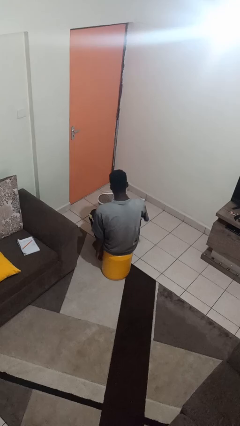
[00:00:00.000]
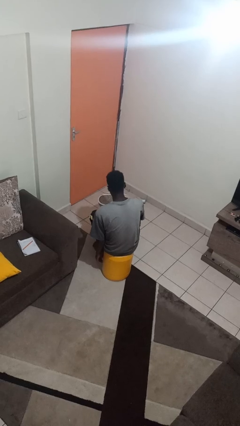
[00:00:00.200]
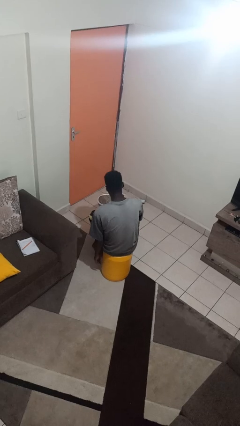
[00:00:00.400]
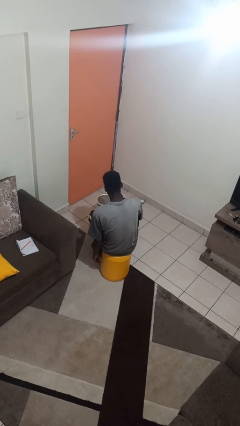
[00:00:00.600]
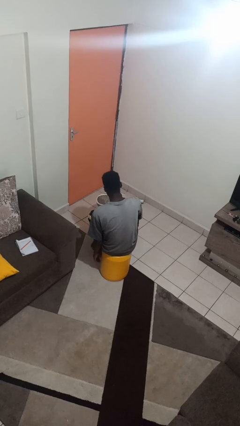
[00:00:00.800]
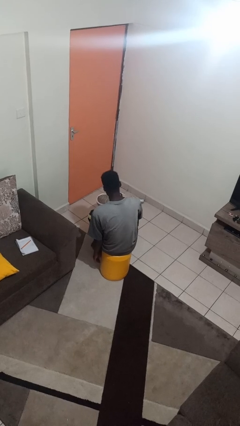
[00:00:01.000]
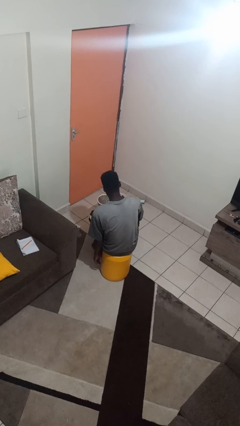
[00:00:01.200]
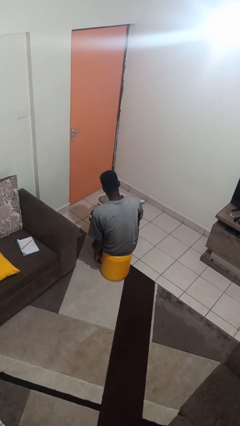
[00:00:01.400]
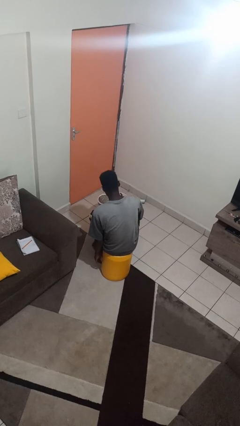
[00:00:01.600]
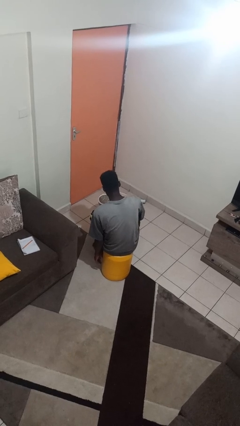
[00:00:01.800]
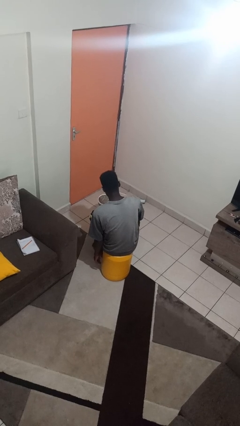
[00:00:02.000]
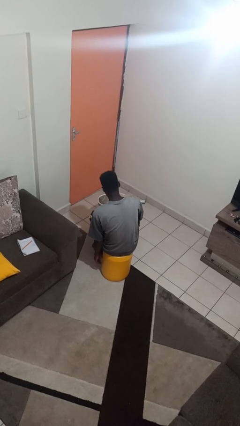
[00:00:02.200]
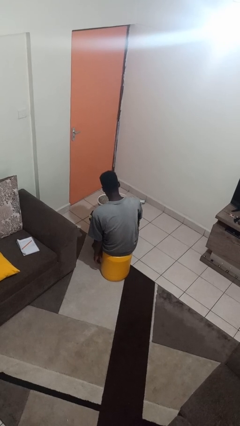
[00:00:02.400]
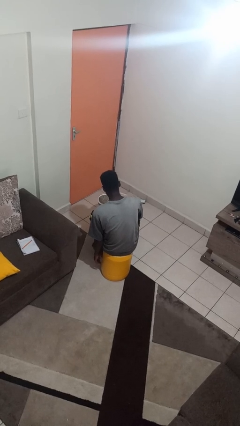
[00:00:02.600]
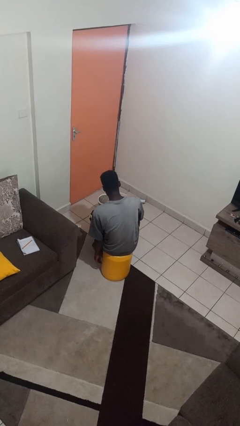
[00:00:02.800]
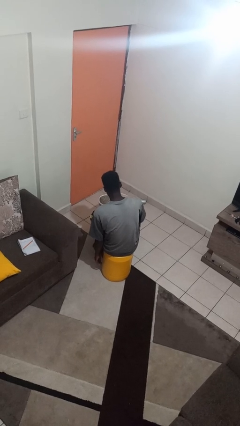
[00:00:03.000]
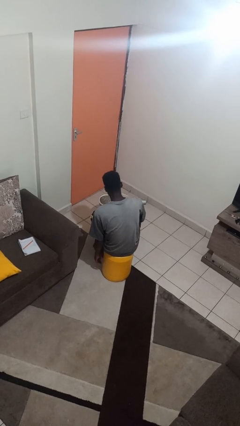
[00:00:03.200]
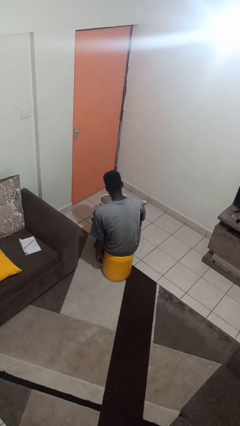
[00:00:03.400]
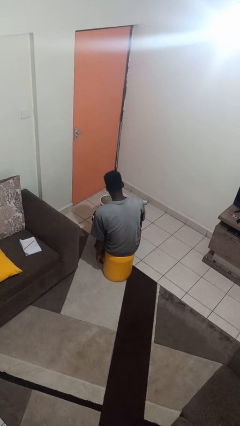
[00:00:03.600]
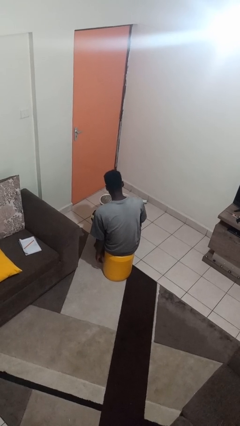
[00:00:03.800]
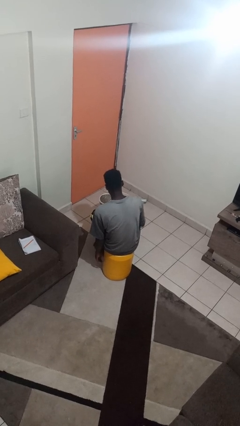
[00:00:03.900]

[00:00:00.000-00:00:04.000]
person taps object with finger

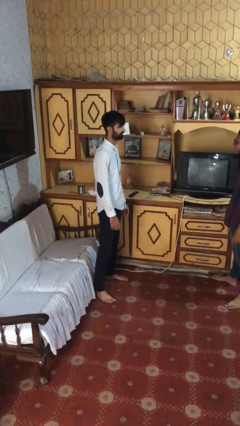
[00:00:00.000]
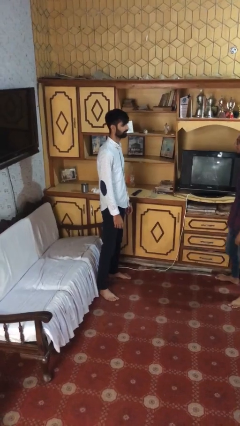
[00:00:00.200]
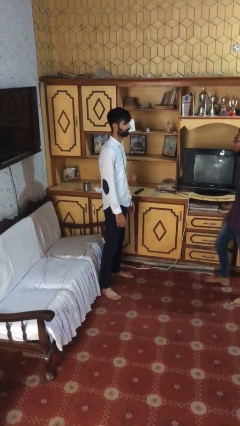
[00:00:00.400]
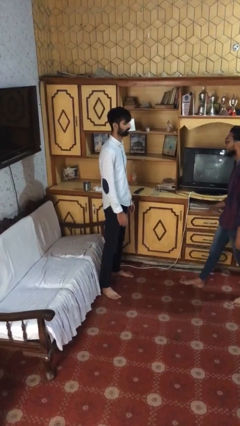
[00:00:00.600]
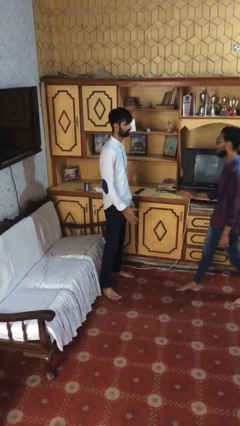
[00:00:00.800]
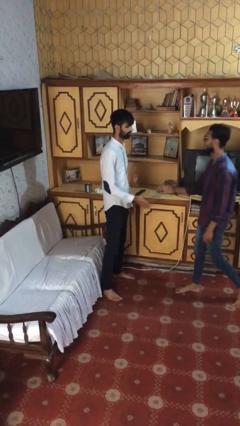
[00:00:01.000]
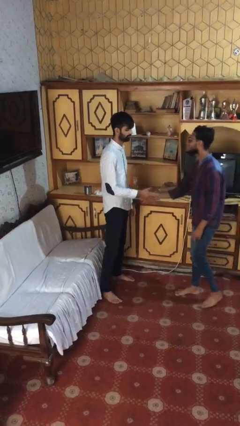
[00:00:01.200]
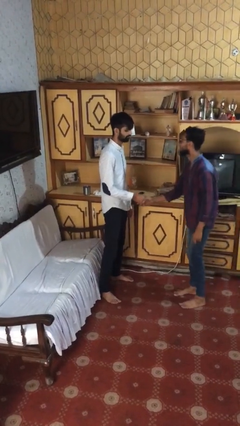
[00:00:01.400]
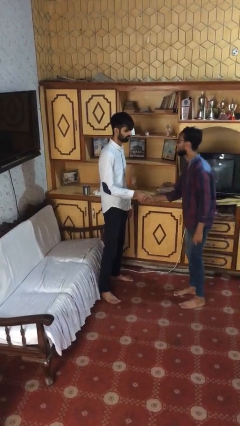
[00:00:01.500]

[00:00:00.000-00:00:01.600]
person shakes hand

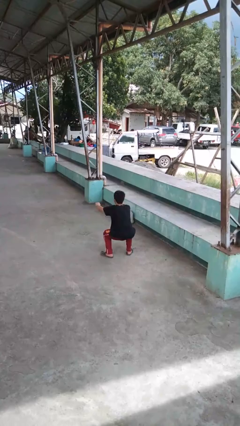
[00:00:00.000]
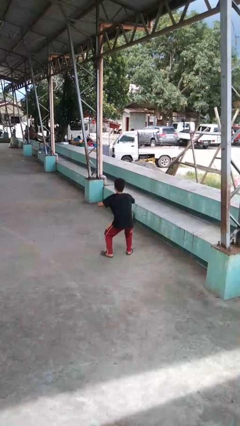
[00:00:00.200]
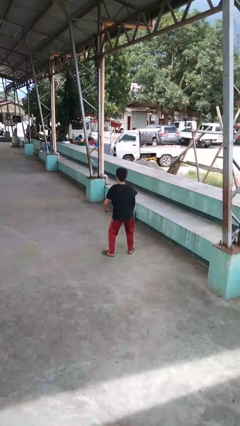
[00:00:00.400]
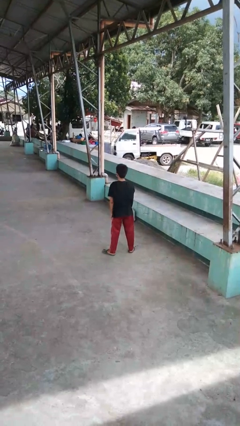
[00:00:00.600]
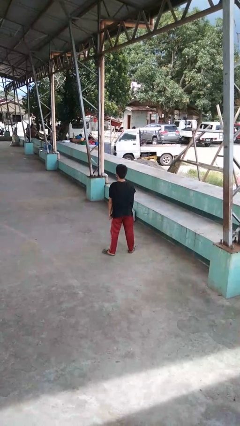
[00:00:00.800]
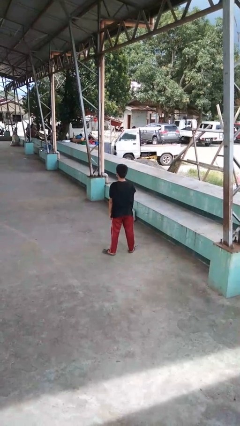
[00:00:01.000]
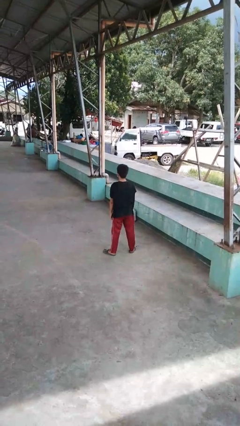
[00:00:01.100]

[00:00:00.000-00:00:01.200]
person stands up

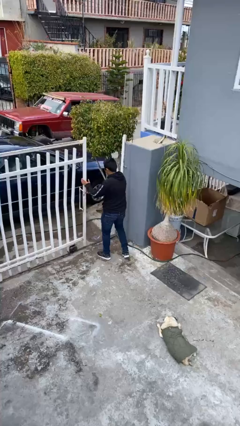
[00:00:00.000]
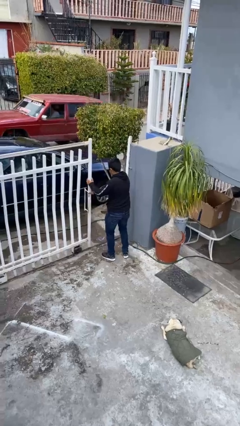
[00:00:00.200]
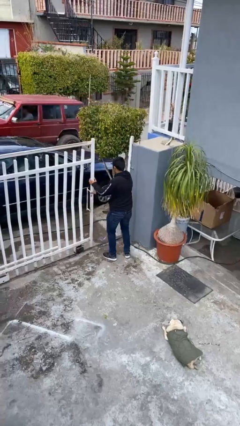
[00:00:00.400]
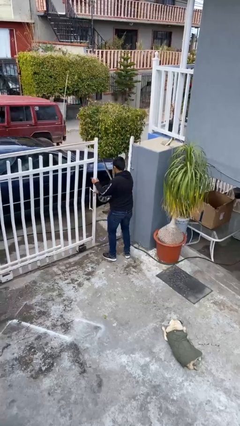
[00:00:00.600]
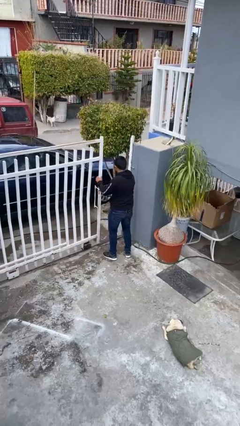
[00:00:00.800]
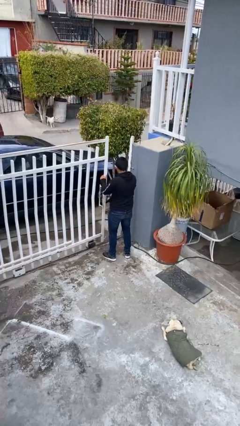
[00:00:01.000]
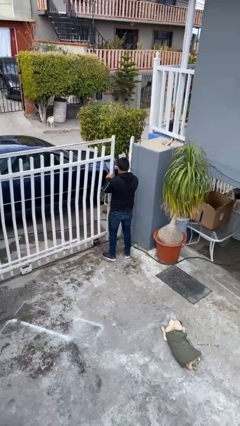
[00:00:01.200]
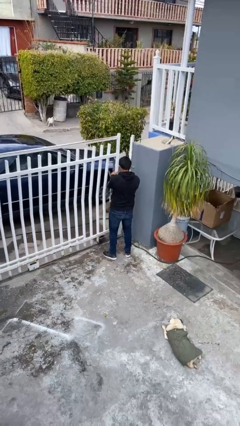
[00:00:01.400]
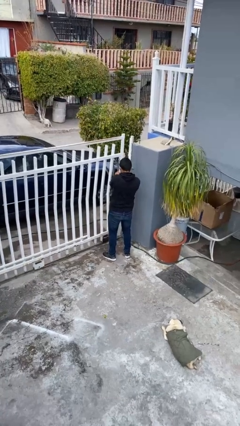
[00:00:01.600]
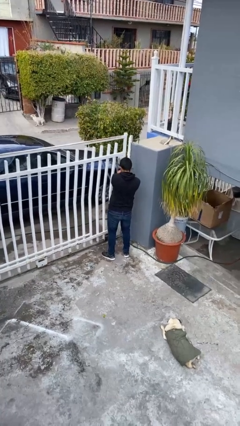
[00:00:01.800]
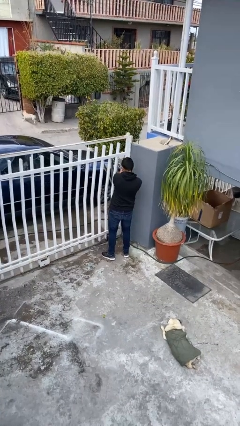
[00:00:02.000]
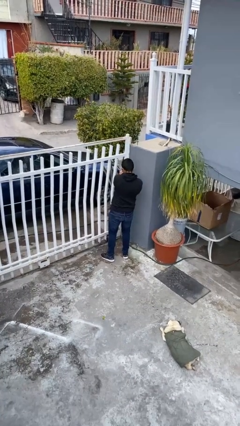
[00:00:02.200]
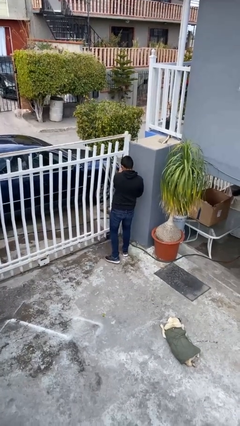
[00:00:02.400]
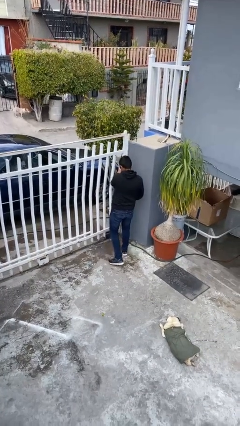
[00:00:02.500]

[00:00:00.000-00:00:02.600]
person closes facility door

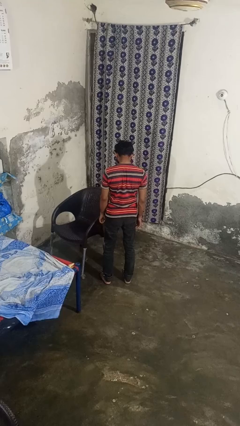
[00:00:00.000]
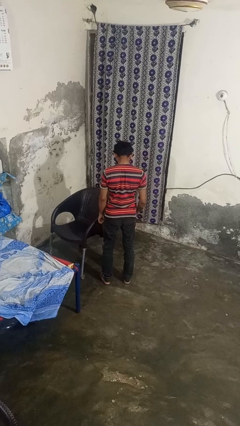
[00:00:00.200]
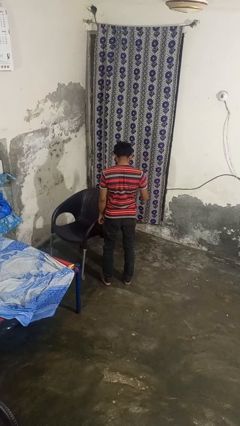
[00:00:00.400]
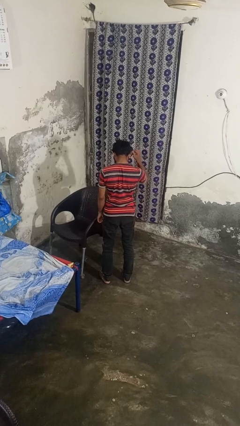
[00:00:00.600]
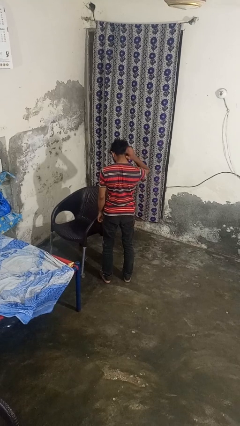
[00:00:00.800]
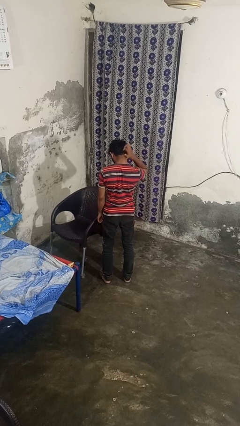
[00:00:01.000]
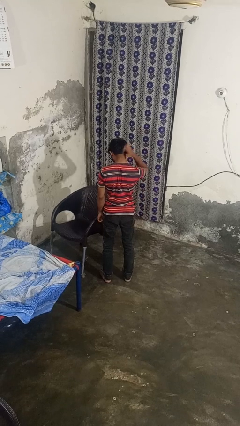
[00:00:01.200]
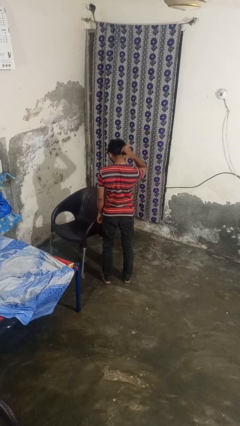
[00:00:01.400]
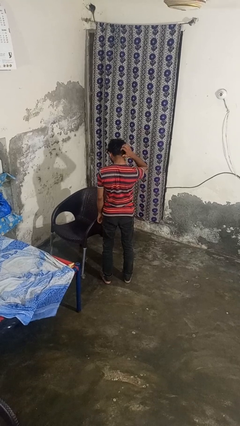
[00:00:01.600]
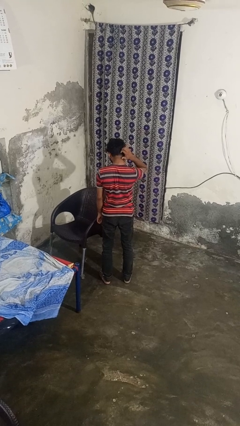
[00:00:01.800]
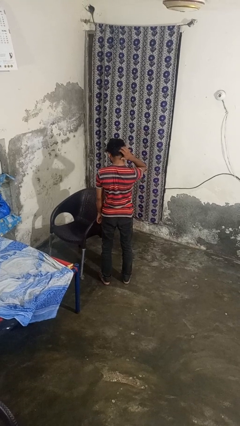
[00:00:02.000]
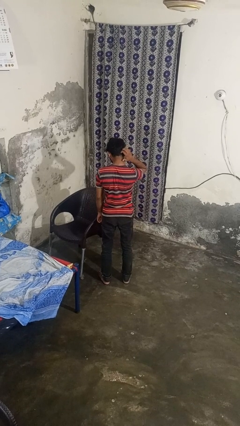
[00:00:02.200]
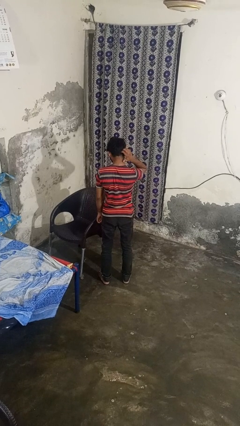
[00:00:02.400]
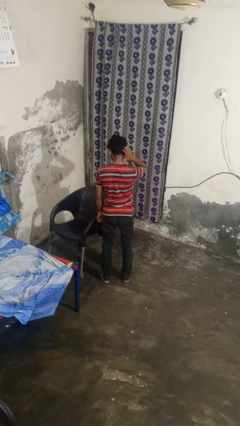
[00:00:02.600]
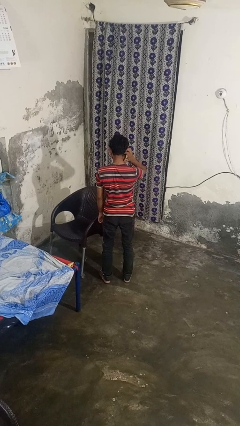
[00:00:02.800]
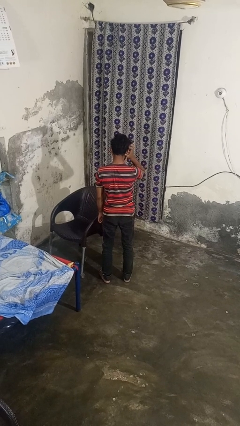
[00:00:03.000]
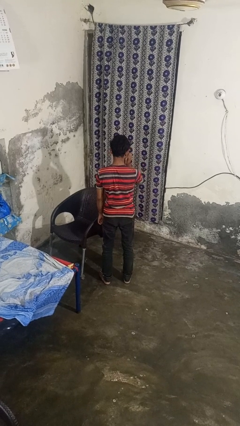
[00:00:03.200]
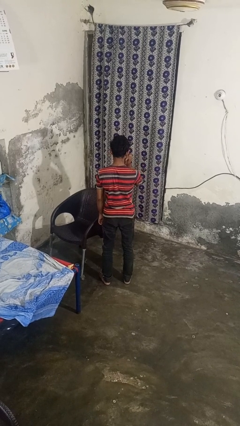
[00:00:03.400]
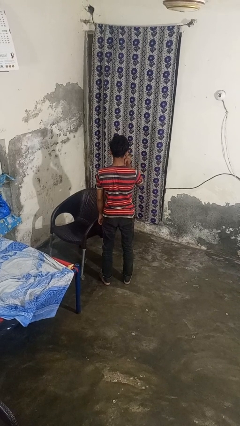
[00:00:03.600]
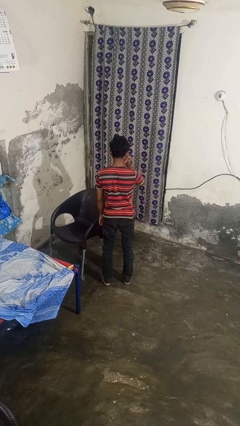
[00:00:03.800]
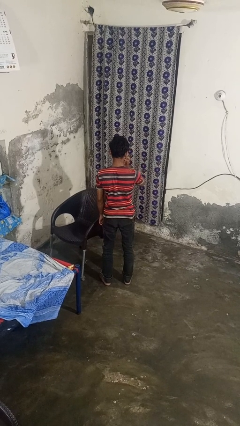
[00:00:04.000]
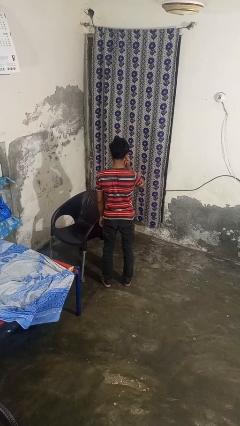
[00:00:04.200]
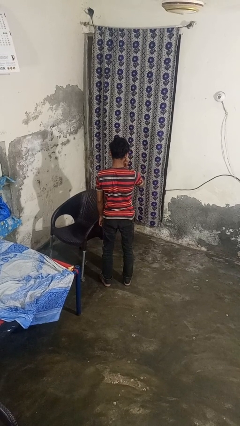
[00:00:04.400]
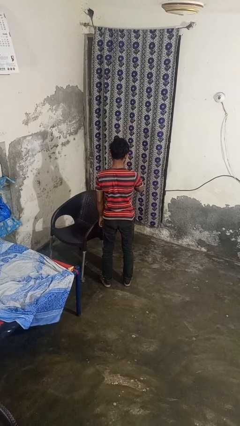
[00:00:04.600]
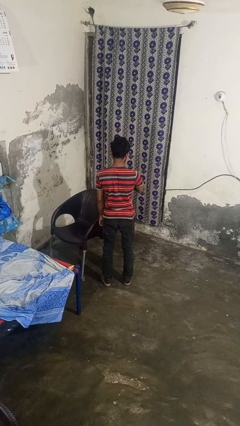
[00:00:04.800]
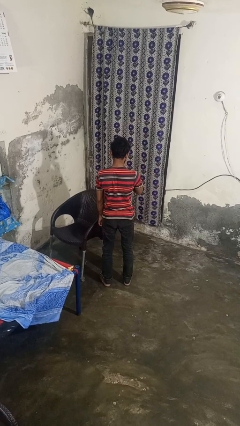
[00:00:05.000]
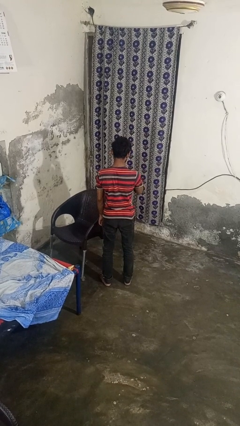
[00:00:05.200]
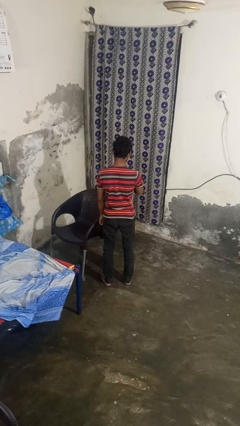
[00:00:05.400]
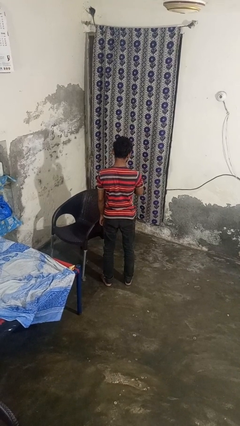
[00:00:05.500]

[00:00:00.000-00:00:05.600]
person scratches face

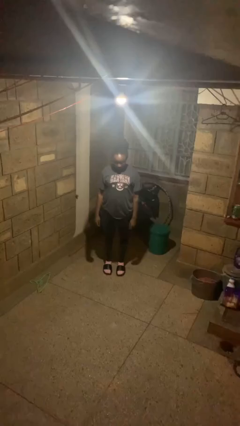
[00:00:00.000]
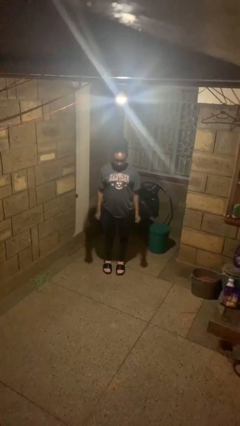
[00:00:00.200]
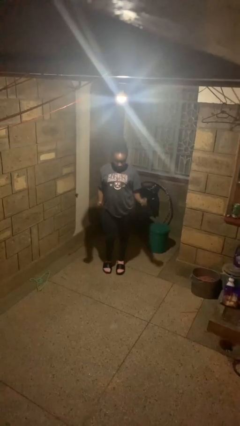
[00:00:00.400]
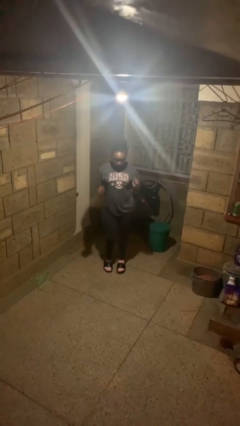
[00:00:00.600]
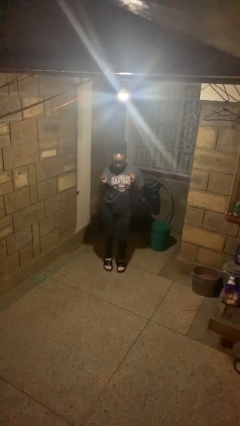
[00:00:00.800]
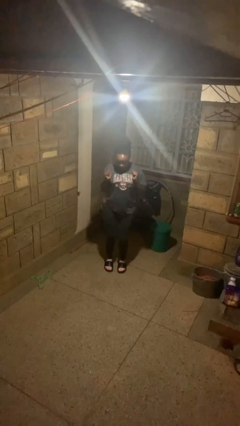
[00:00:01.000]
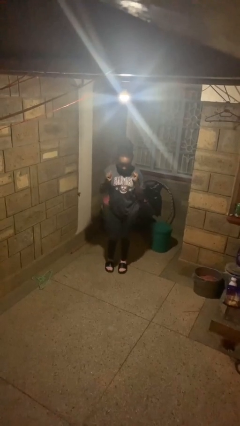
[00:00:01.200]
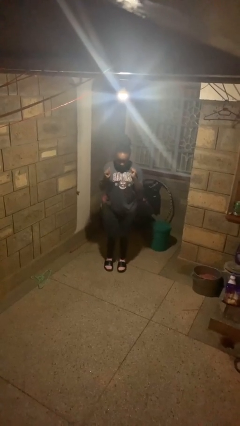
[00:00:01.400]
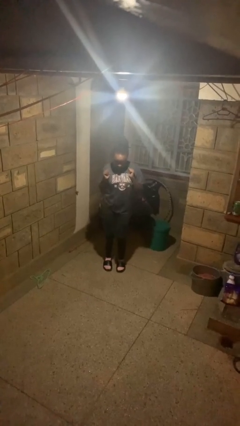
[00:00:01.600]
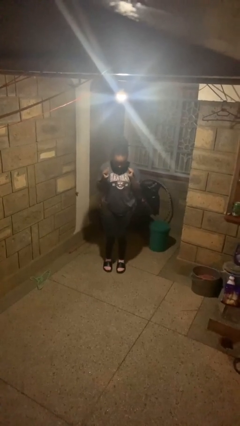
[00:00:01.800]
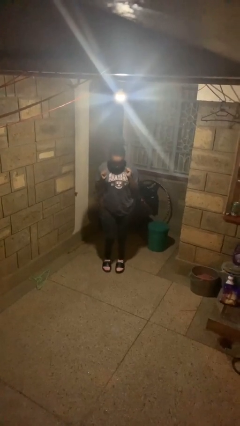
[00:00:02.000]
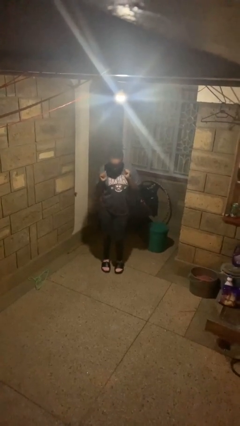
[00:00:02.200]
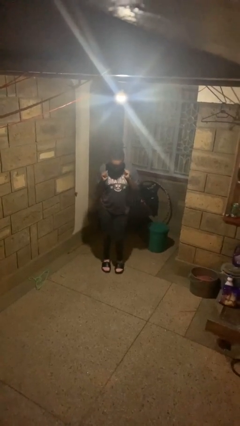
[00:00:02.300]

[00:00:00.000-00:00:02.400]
person wiggles hips
